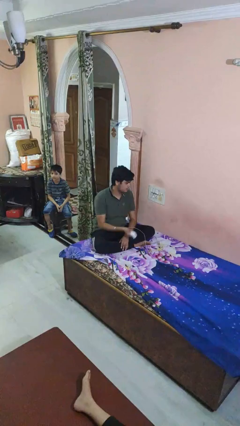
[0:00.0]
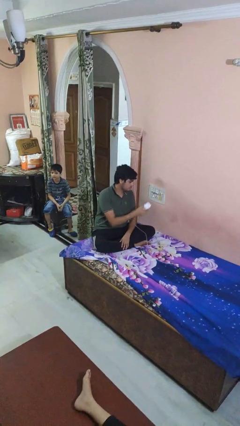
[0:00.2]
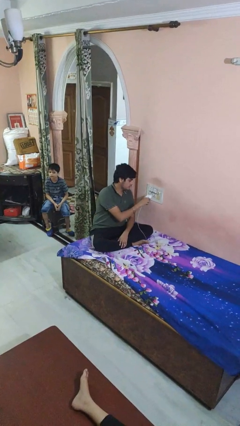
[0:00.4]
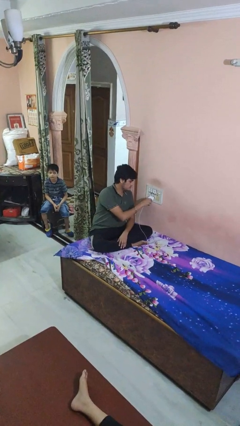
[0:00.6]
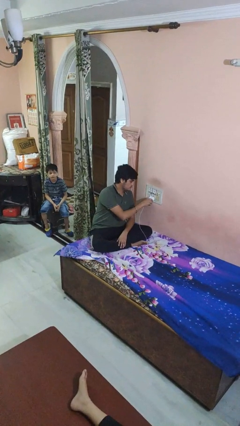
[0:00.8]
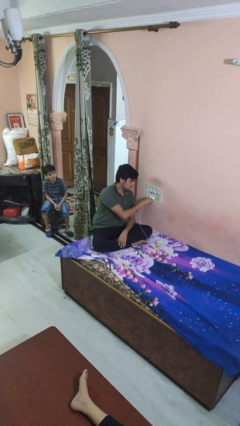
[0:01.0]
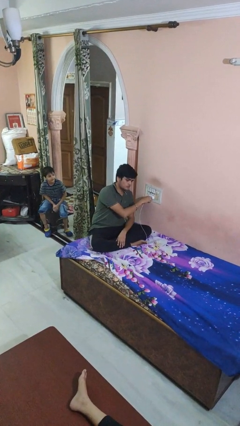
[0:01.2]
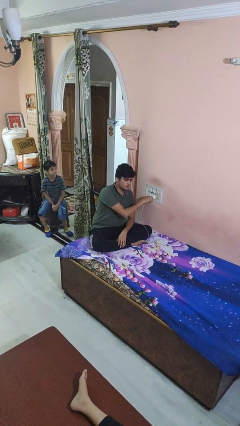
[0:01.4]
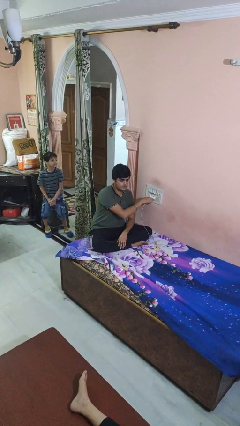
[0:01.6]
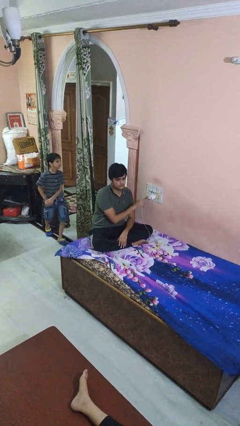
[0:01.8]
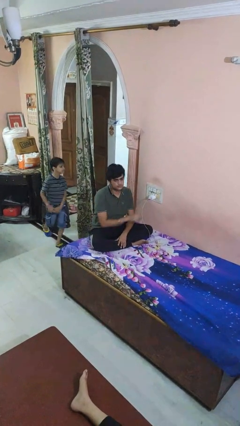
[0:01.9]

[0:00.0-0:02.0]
person plugs into electrical socket

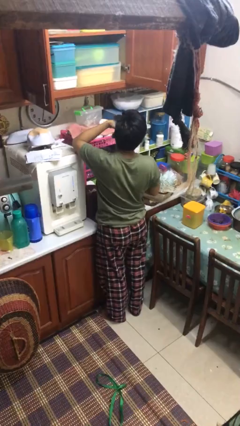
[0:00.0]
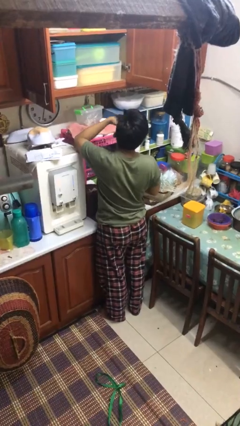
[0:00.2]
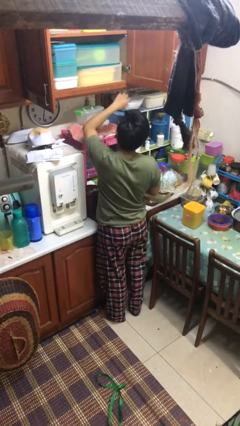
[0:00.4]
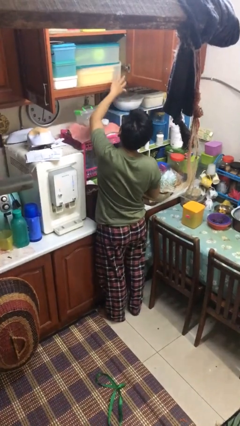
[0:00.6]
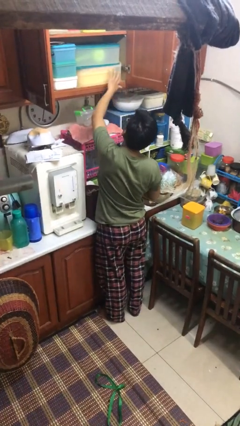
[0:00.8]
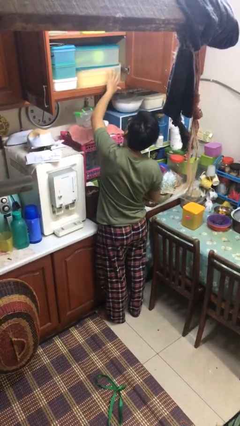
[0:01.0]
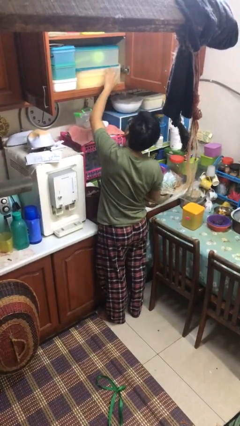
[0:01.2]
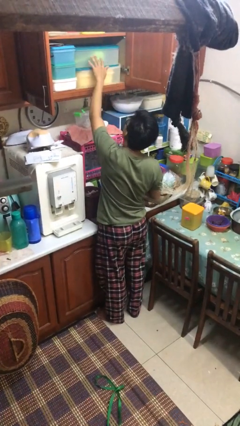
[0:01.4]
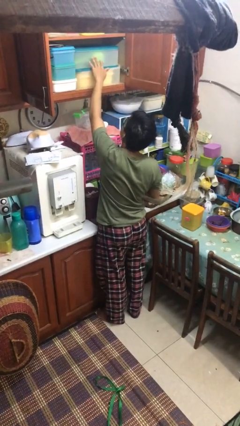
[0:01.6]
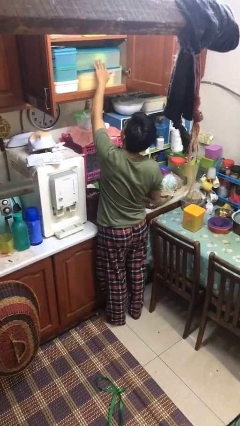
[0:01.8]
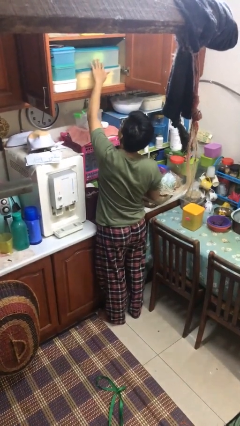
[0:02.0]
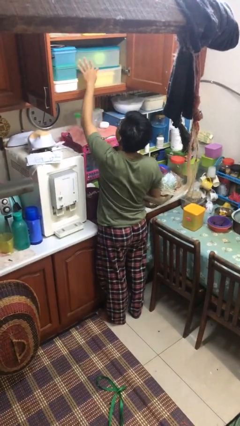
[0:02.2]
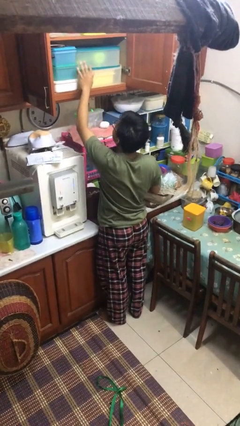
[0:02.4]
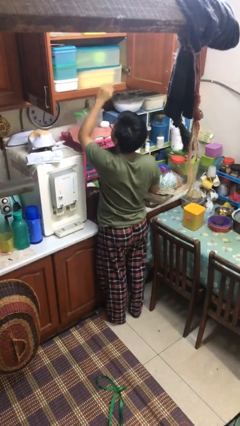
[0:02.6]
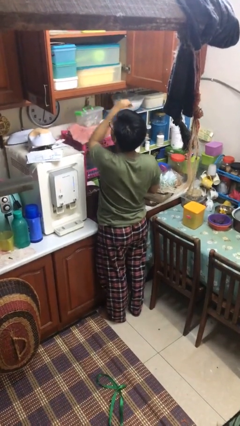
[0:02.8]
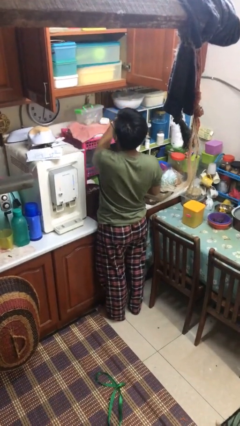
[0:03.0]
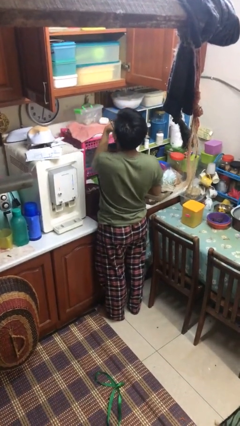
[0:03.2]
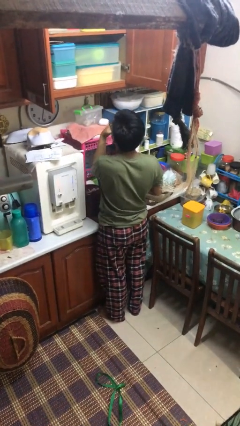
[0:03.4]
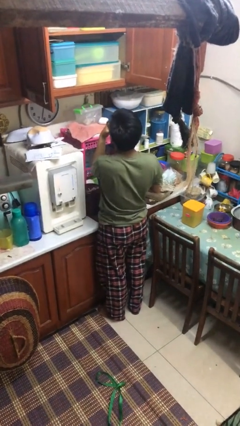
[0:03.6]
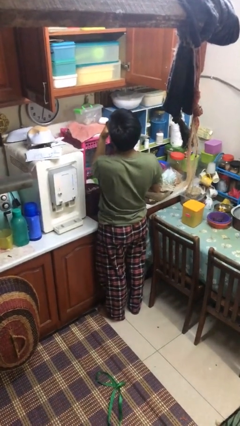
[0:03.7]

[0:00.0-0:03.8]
person searches in kitchen drawer

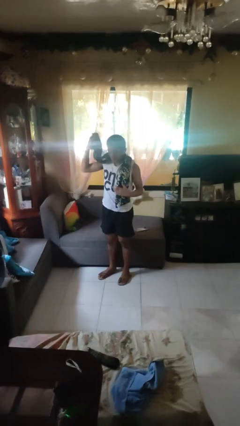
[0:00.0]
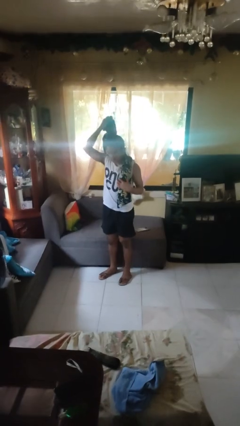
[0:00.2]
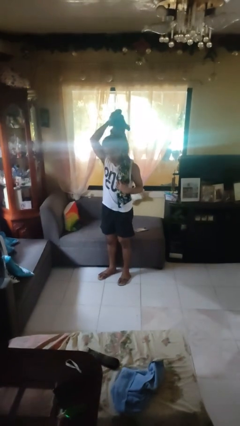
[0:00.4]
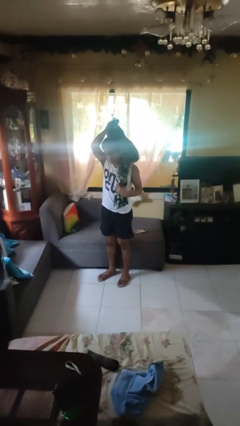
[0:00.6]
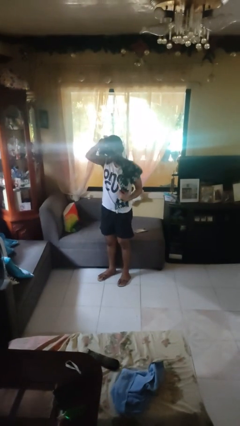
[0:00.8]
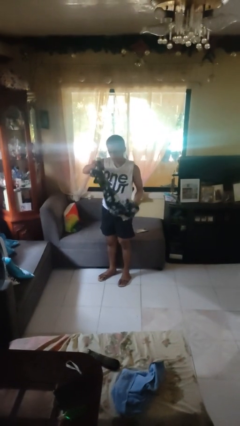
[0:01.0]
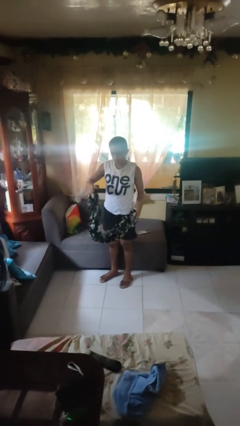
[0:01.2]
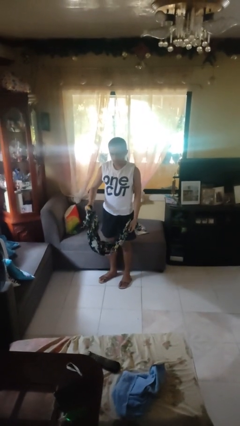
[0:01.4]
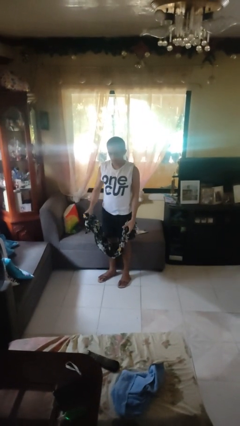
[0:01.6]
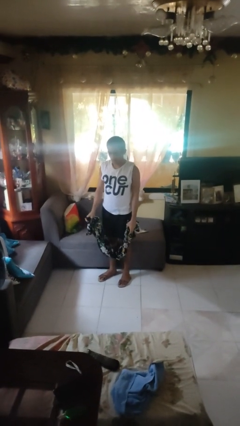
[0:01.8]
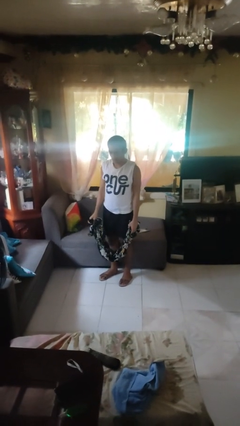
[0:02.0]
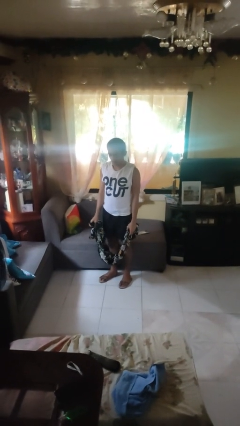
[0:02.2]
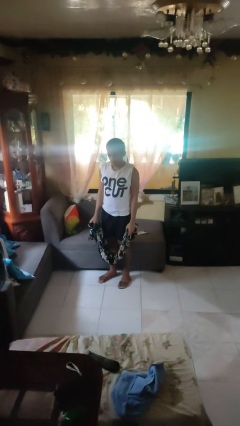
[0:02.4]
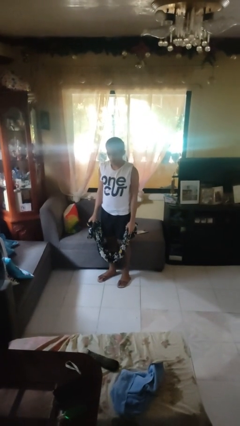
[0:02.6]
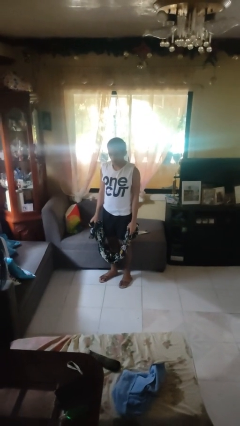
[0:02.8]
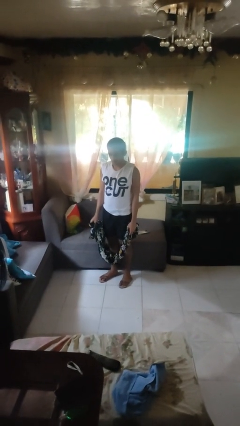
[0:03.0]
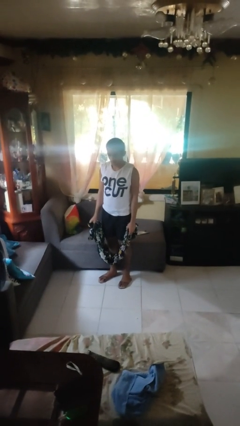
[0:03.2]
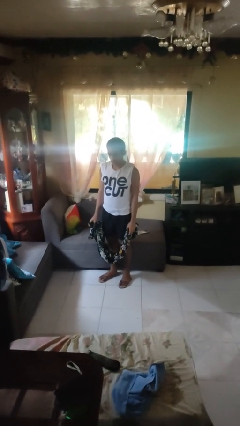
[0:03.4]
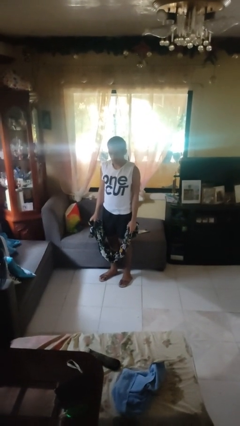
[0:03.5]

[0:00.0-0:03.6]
person takes off scarf

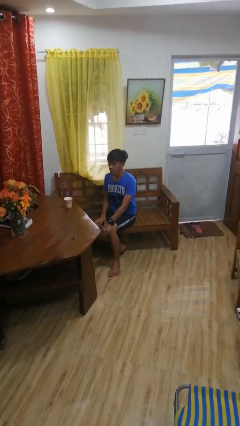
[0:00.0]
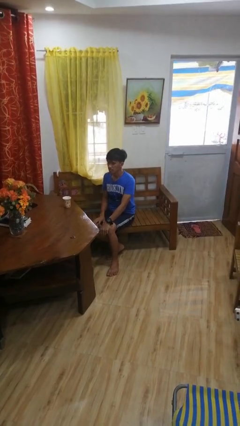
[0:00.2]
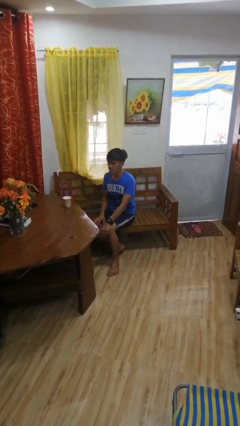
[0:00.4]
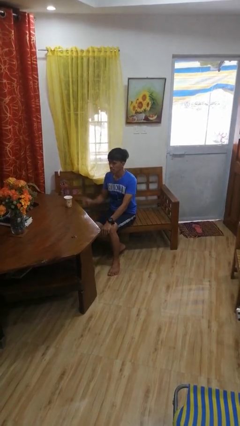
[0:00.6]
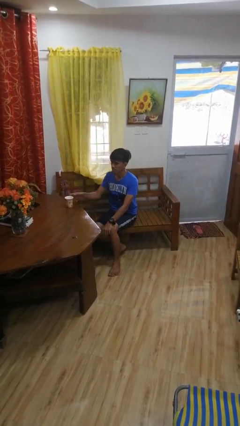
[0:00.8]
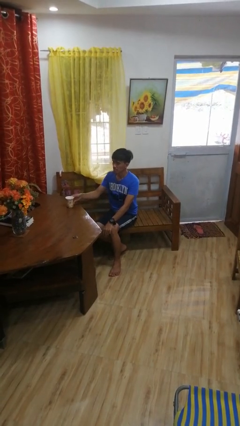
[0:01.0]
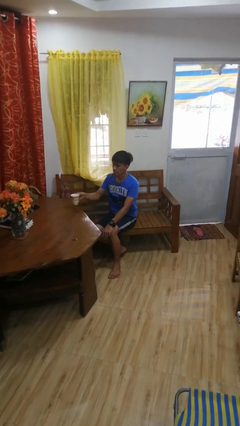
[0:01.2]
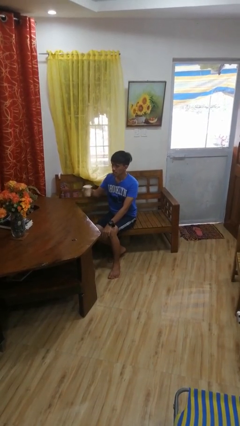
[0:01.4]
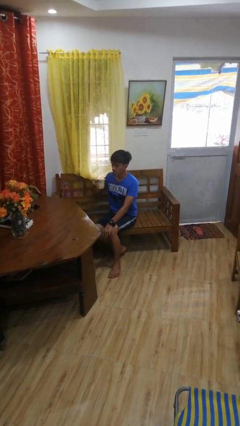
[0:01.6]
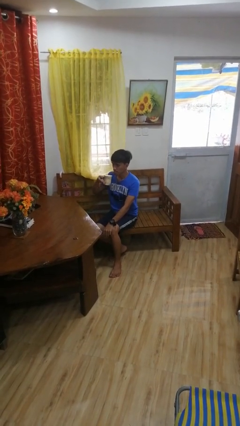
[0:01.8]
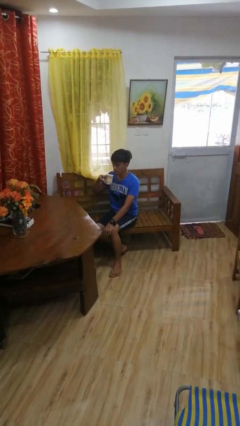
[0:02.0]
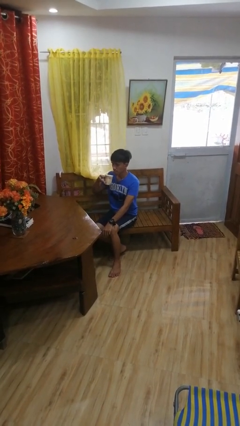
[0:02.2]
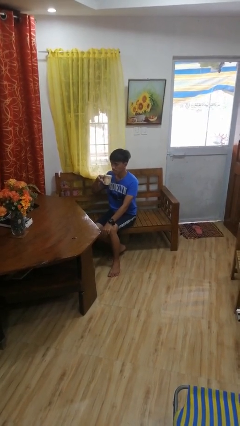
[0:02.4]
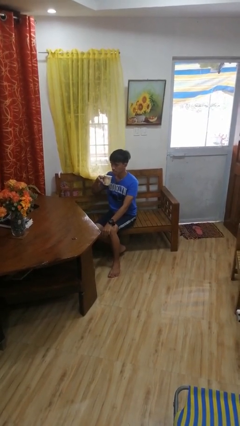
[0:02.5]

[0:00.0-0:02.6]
person picks up object from table

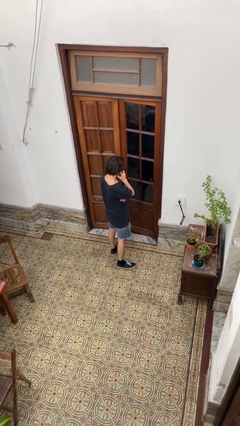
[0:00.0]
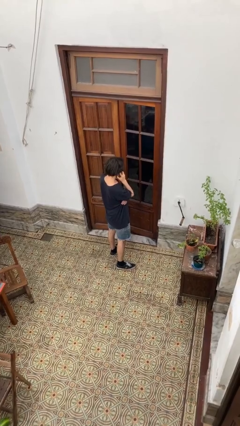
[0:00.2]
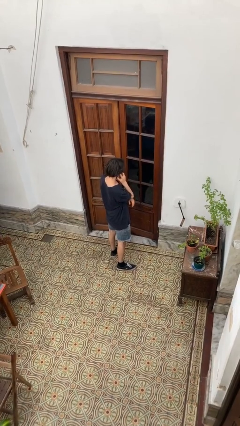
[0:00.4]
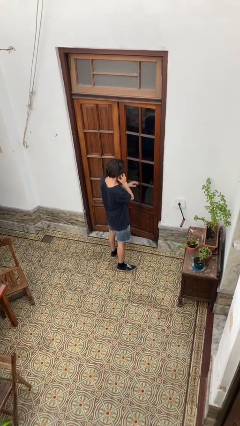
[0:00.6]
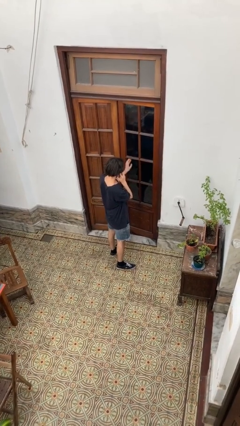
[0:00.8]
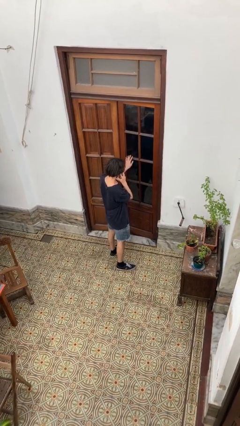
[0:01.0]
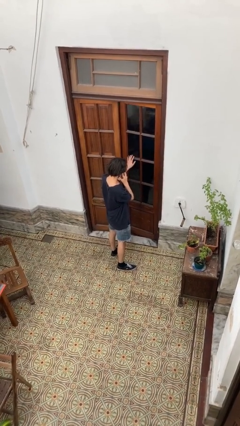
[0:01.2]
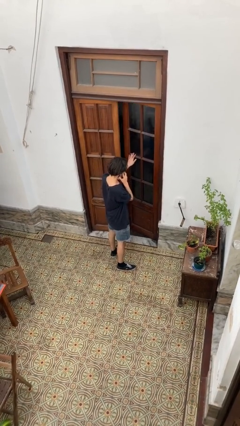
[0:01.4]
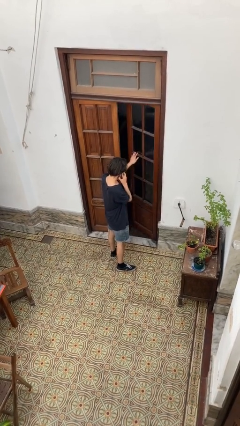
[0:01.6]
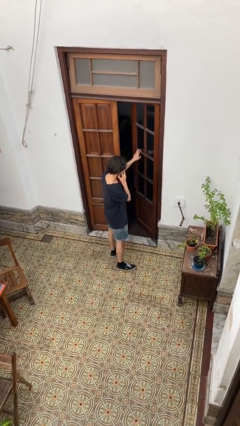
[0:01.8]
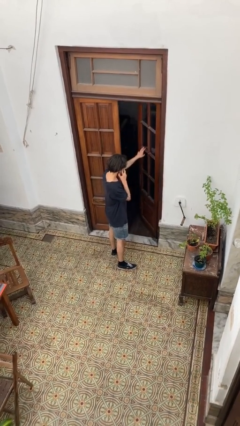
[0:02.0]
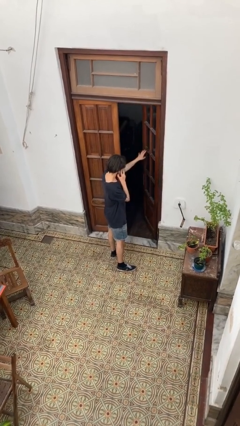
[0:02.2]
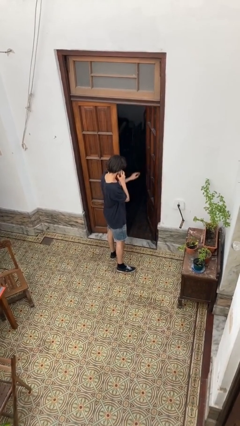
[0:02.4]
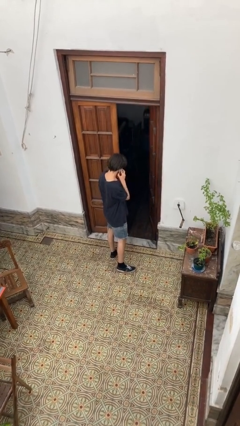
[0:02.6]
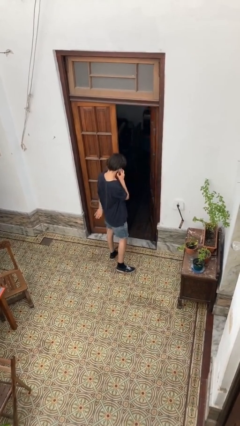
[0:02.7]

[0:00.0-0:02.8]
person opens facility door

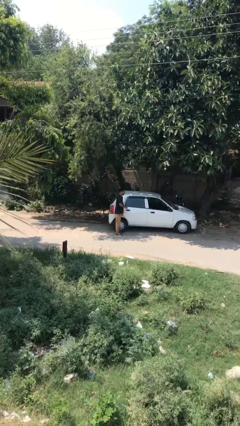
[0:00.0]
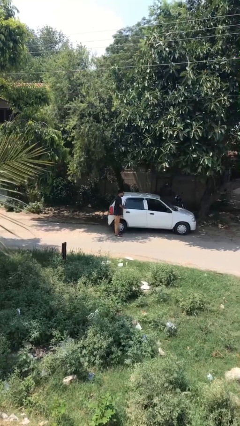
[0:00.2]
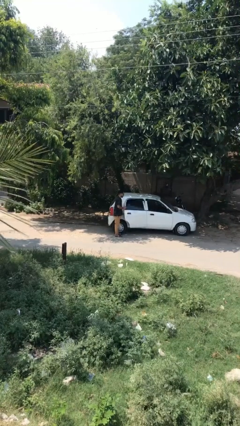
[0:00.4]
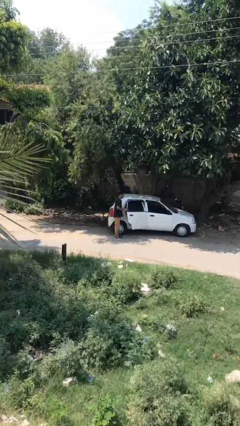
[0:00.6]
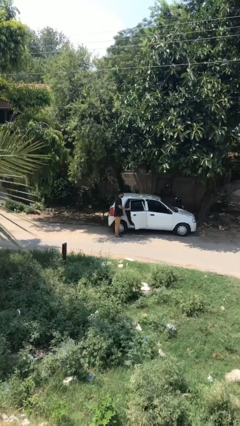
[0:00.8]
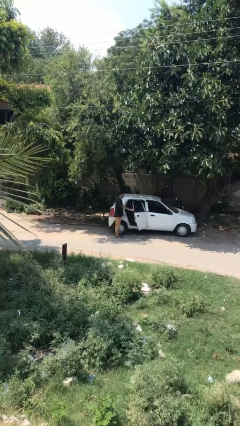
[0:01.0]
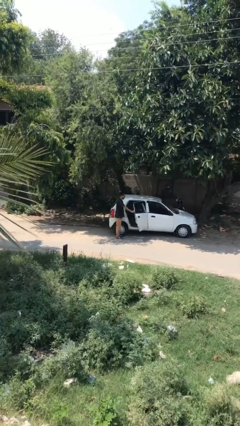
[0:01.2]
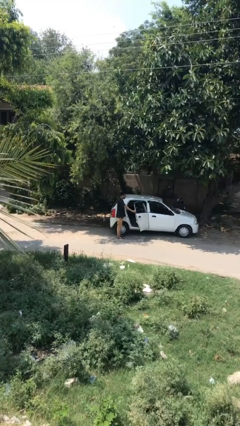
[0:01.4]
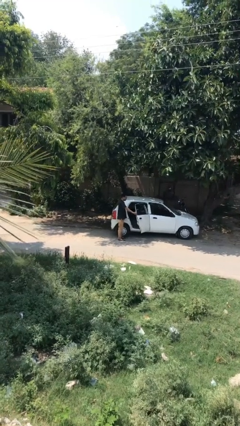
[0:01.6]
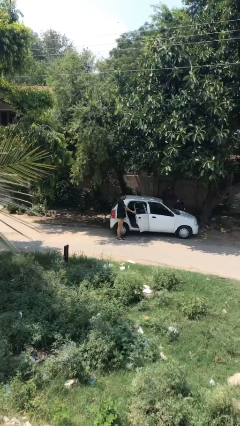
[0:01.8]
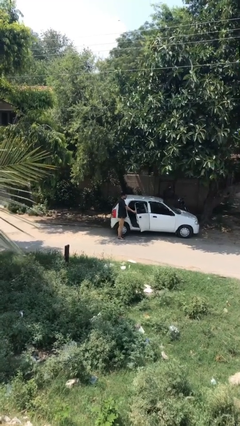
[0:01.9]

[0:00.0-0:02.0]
person opens car door
